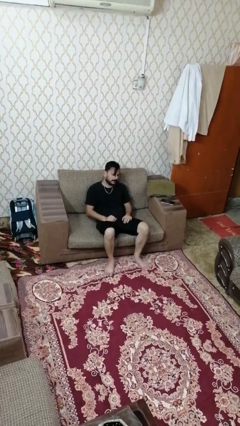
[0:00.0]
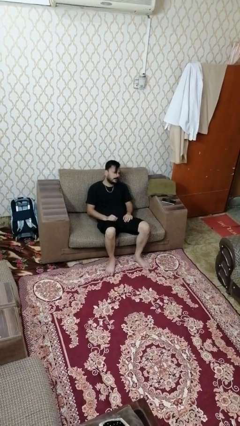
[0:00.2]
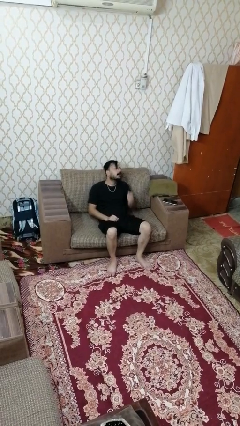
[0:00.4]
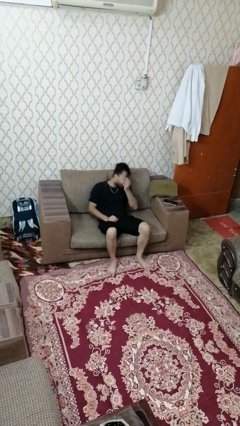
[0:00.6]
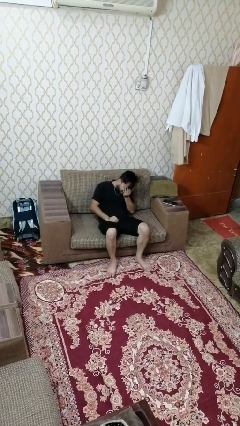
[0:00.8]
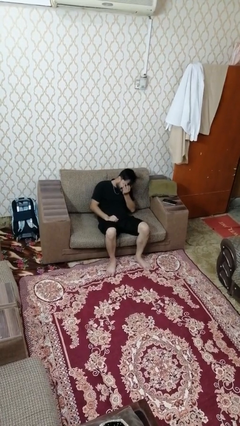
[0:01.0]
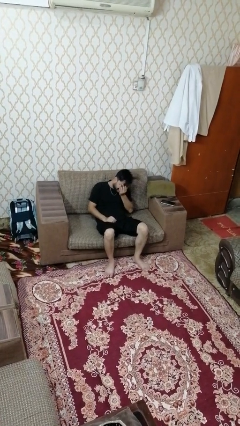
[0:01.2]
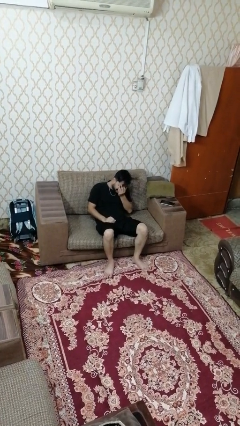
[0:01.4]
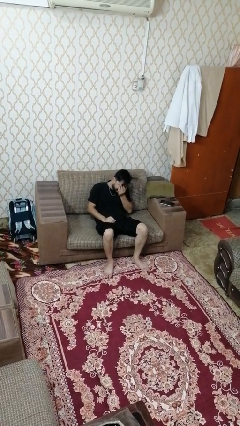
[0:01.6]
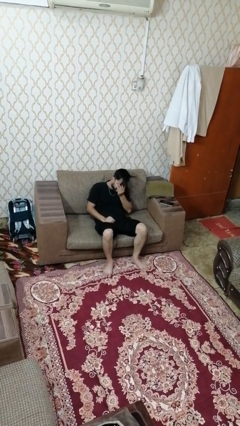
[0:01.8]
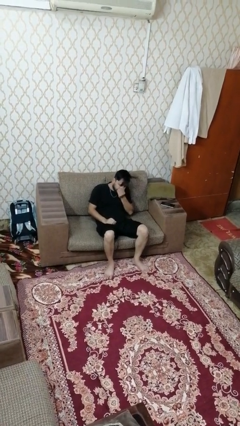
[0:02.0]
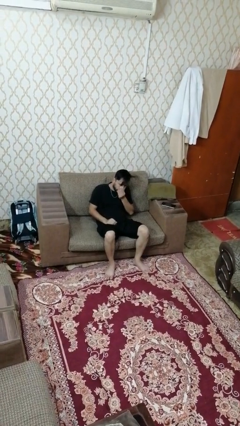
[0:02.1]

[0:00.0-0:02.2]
person sneezes into hand

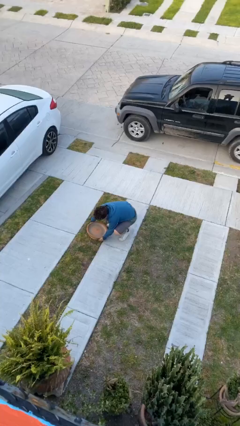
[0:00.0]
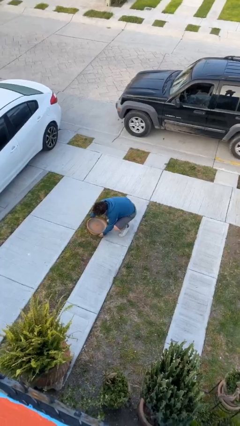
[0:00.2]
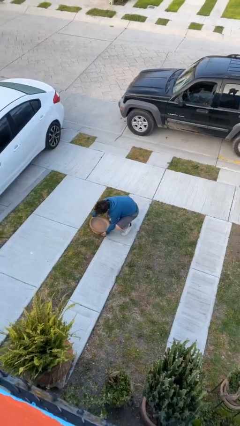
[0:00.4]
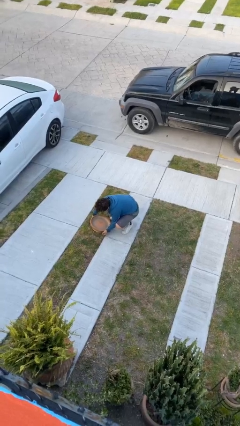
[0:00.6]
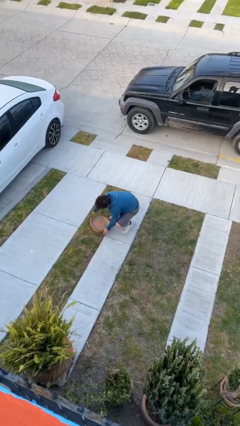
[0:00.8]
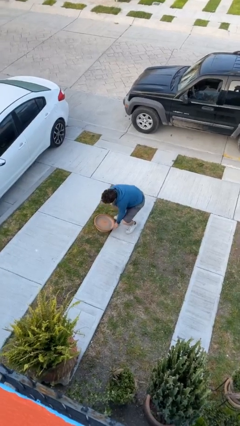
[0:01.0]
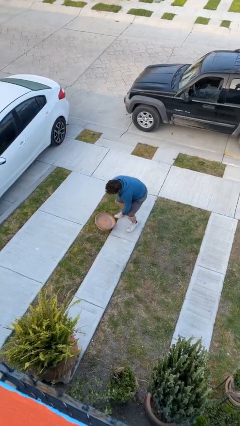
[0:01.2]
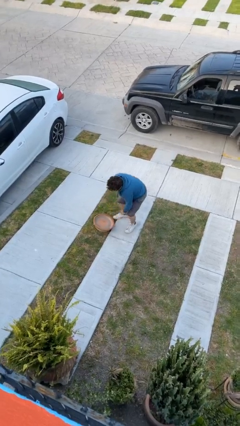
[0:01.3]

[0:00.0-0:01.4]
person puts down object on floor

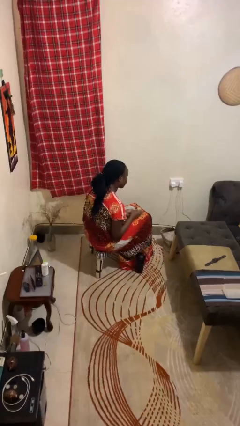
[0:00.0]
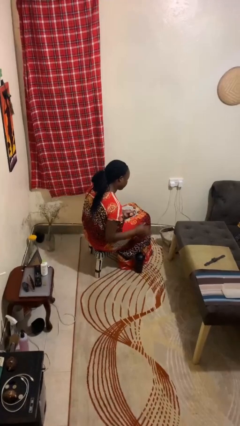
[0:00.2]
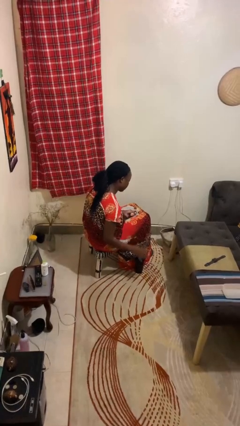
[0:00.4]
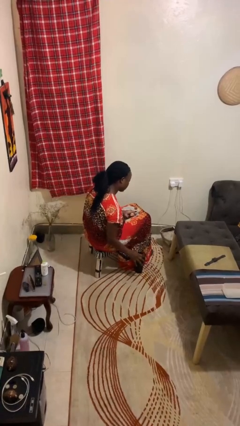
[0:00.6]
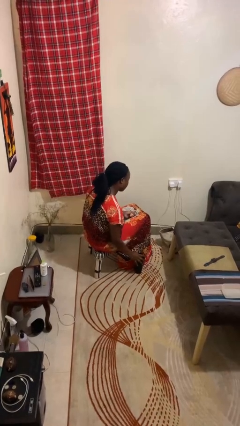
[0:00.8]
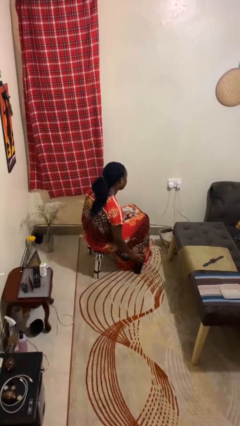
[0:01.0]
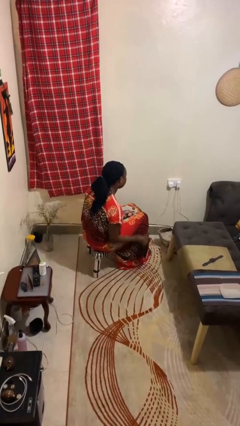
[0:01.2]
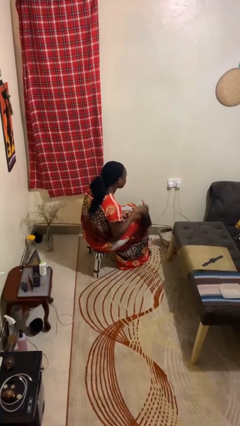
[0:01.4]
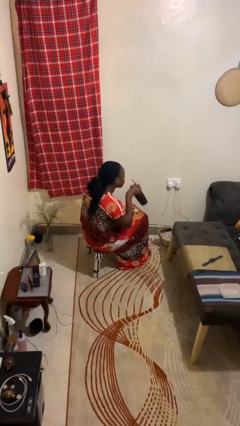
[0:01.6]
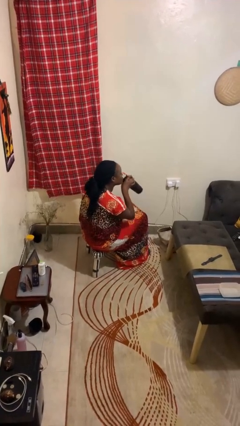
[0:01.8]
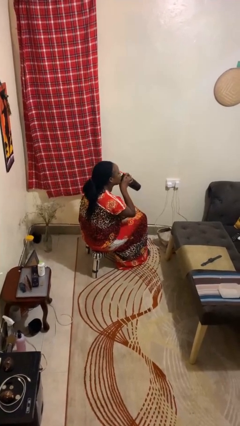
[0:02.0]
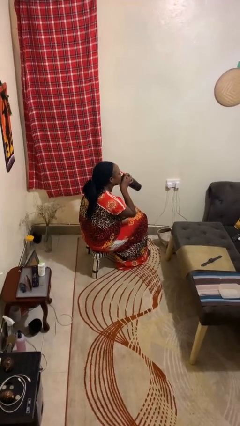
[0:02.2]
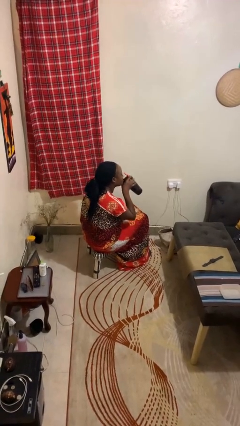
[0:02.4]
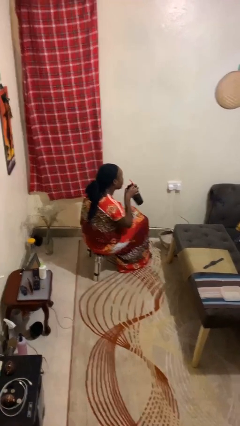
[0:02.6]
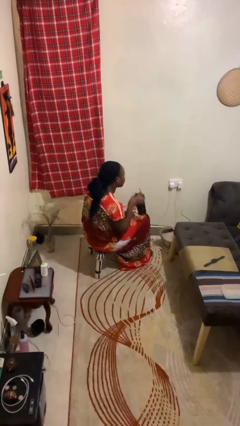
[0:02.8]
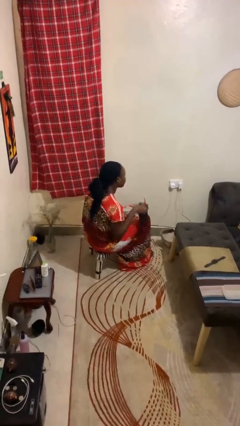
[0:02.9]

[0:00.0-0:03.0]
person drinks from cup

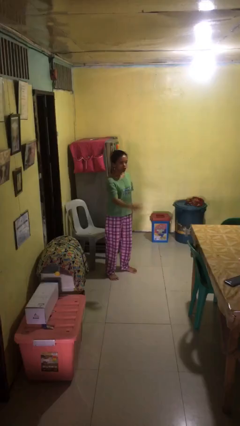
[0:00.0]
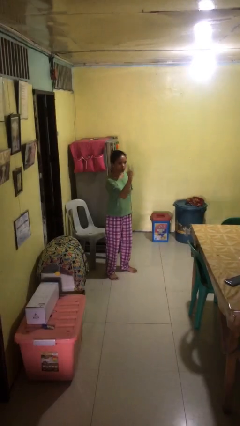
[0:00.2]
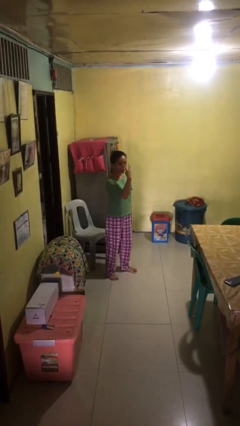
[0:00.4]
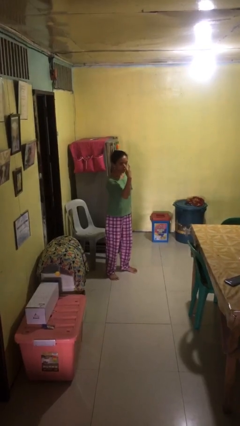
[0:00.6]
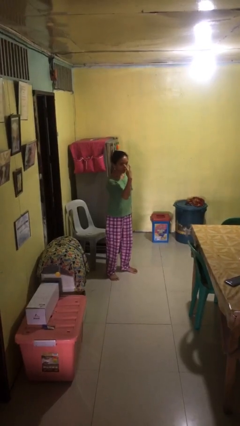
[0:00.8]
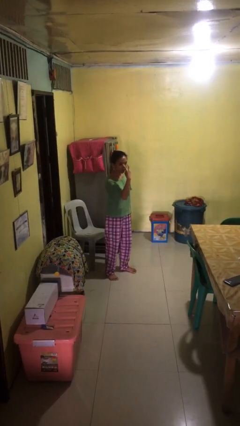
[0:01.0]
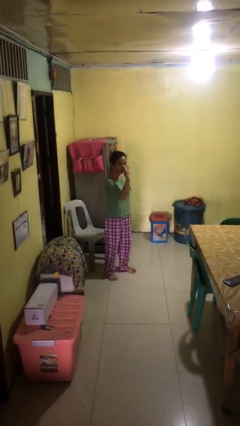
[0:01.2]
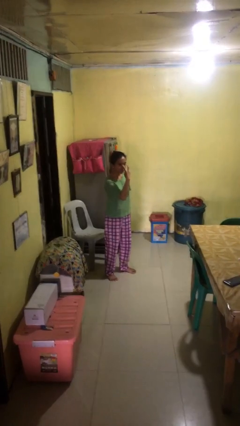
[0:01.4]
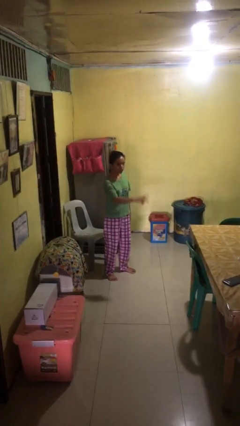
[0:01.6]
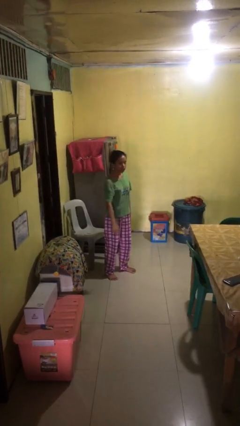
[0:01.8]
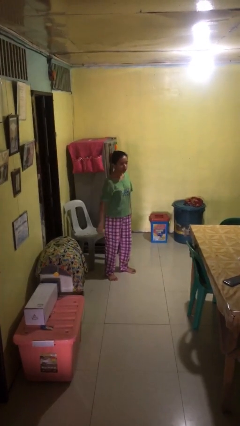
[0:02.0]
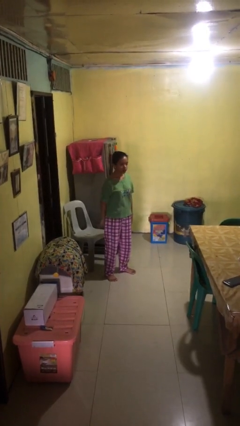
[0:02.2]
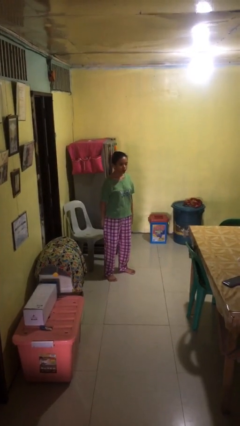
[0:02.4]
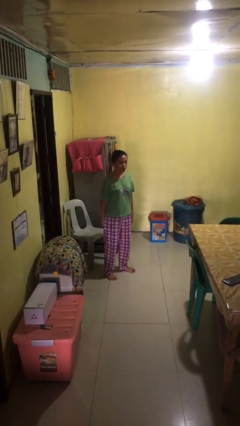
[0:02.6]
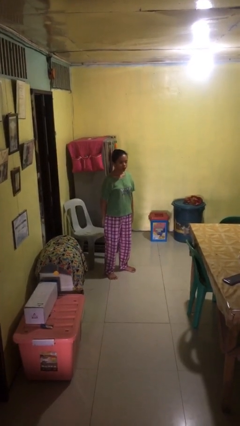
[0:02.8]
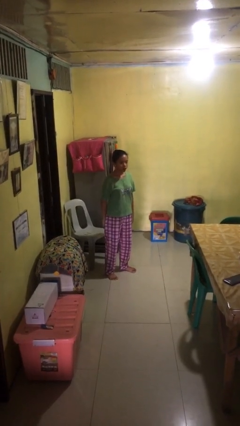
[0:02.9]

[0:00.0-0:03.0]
person gestures watch closely

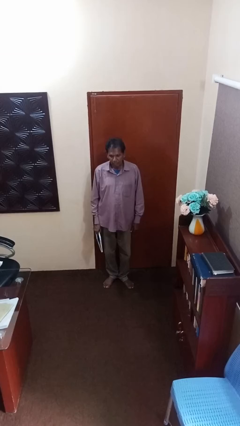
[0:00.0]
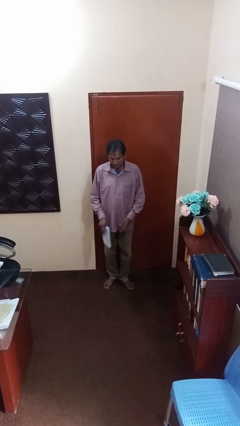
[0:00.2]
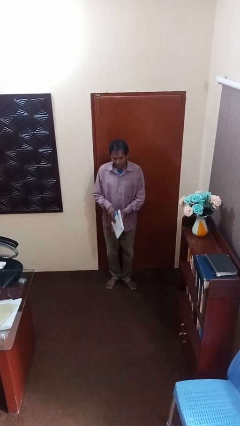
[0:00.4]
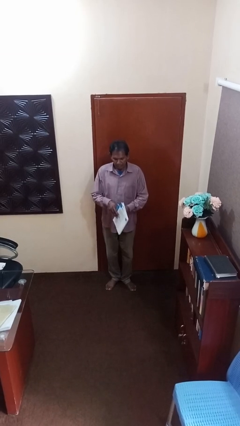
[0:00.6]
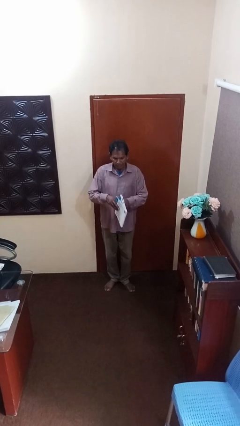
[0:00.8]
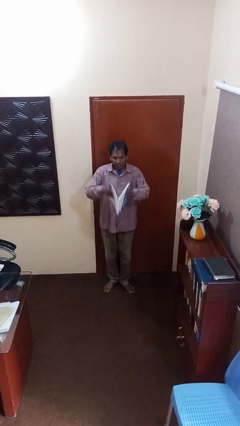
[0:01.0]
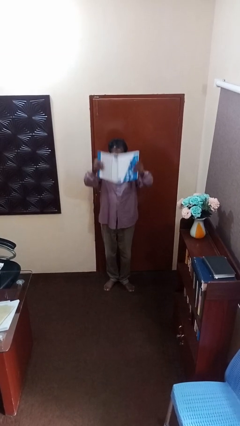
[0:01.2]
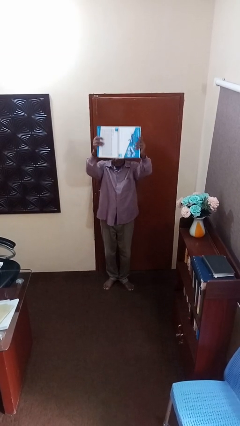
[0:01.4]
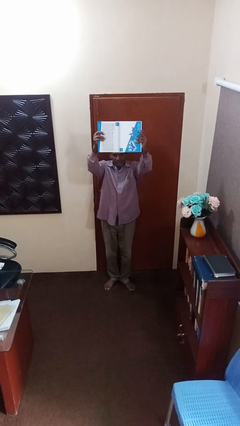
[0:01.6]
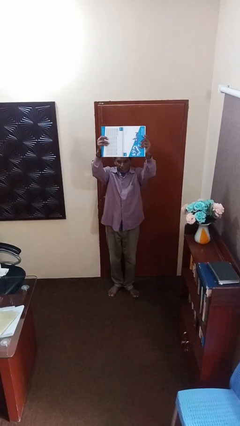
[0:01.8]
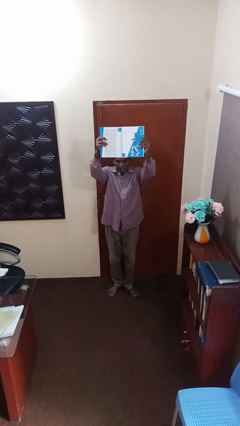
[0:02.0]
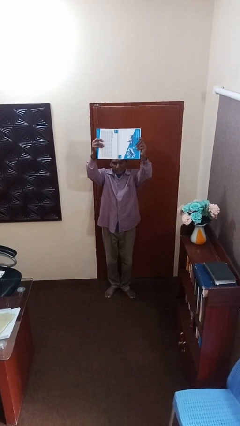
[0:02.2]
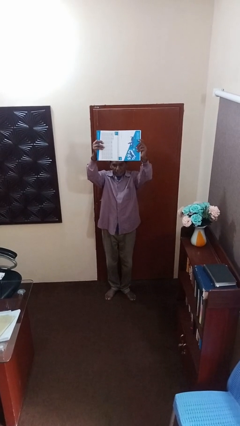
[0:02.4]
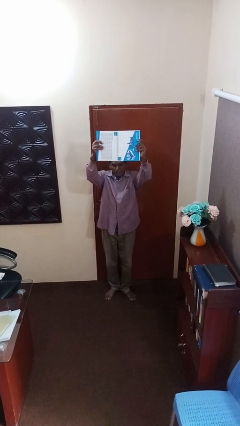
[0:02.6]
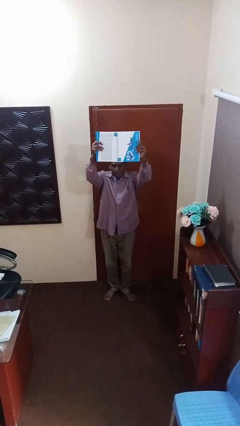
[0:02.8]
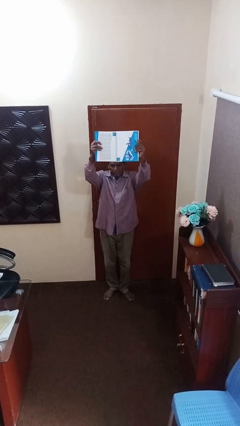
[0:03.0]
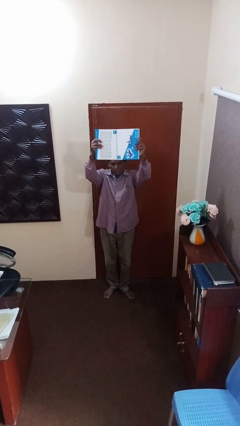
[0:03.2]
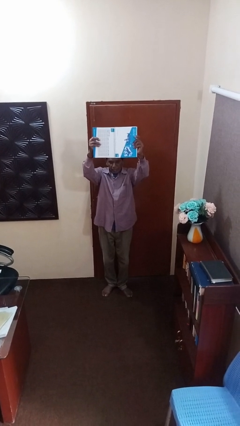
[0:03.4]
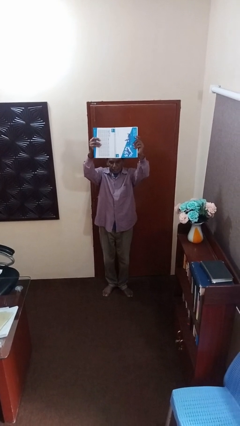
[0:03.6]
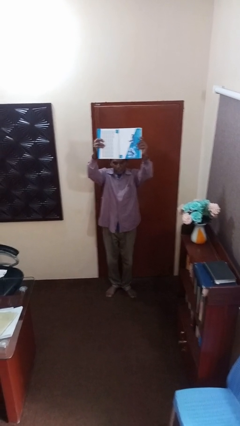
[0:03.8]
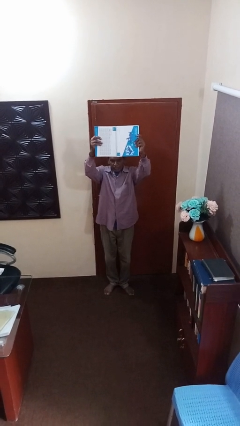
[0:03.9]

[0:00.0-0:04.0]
person holds object above head

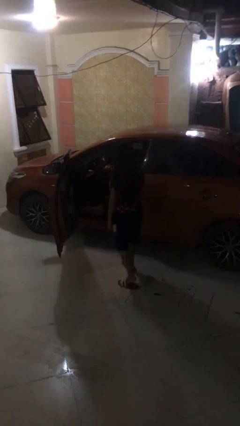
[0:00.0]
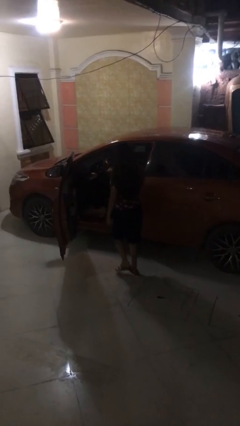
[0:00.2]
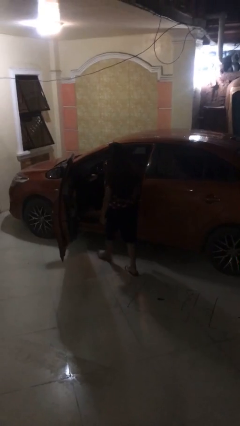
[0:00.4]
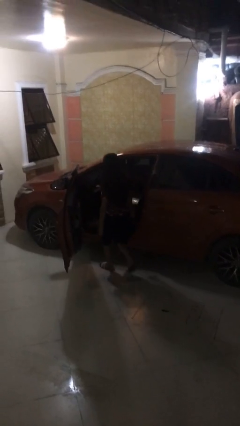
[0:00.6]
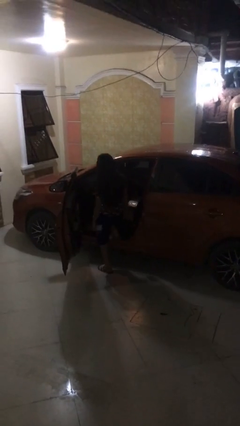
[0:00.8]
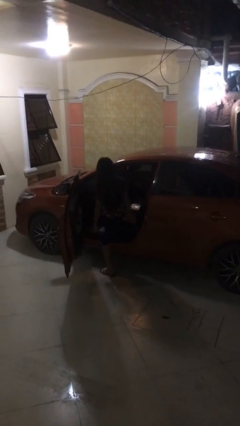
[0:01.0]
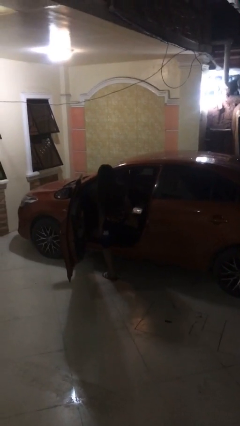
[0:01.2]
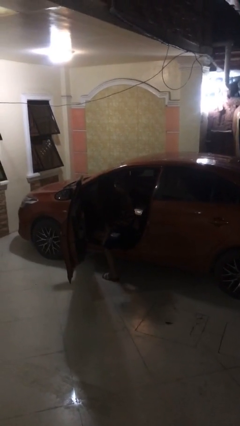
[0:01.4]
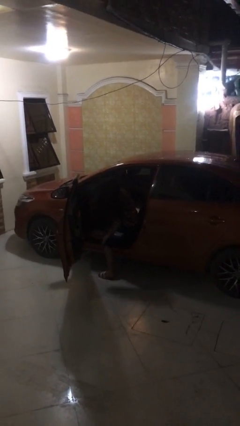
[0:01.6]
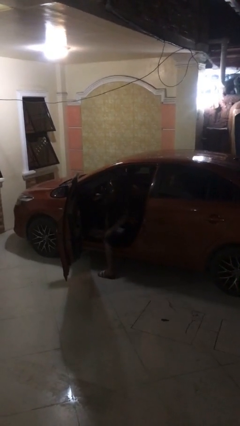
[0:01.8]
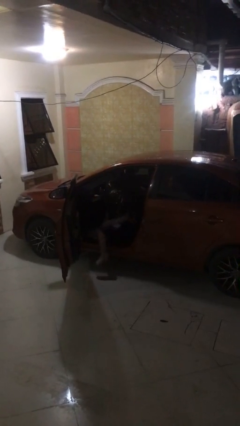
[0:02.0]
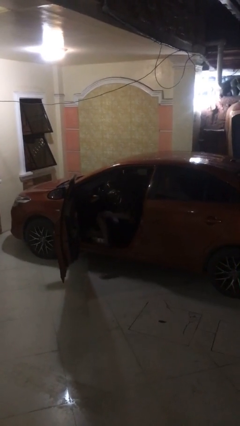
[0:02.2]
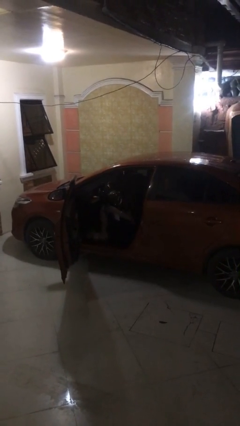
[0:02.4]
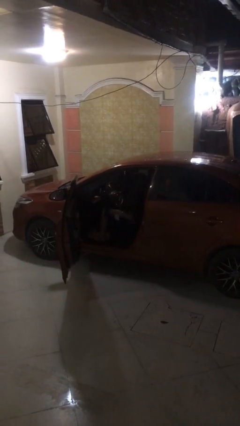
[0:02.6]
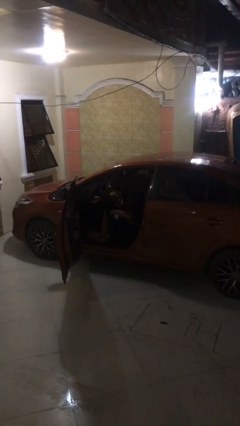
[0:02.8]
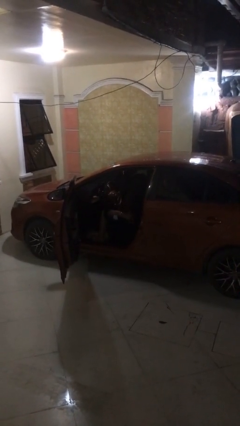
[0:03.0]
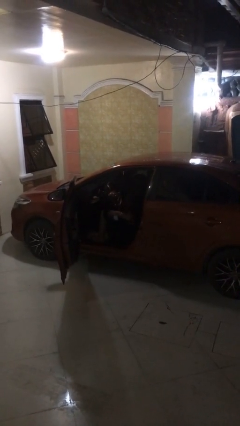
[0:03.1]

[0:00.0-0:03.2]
person enters car

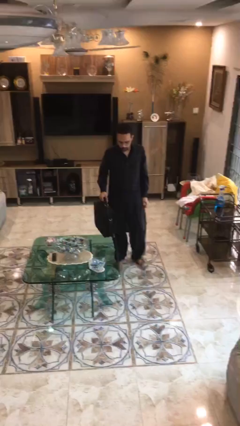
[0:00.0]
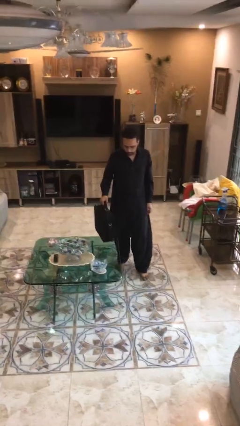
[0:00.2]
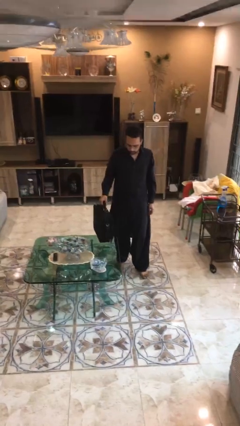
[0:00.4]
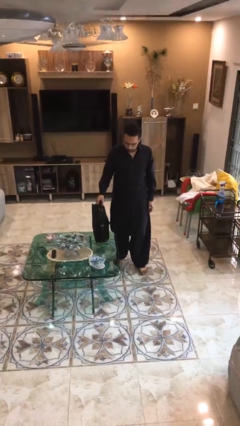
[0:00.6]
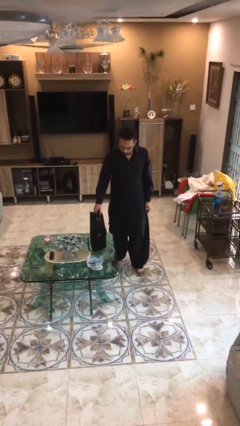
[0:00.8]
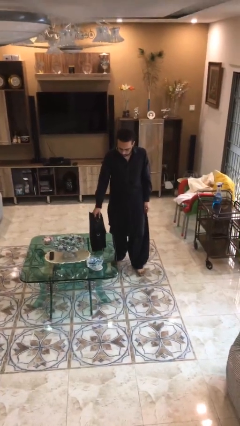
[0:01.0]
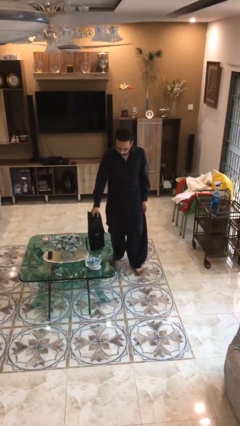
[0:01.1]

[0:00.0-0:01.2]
person puts down object on table
